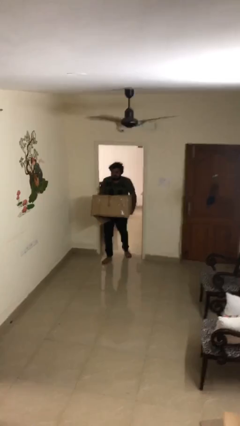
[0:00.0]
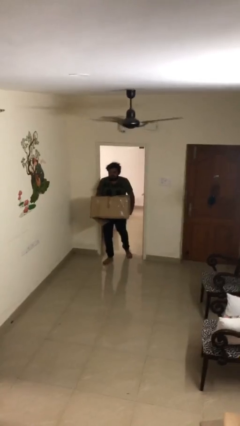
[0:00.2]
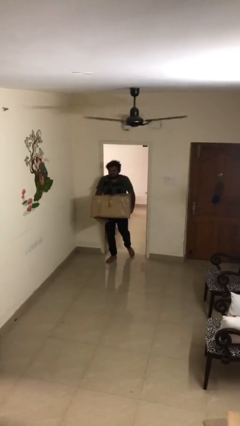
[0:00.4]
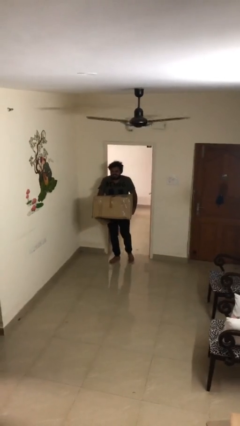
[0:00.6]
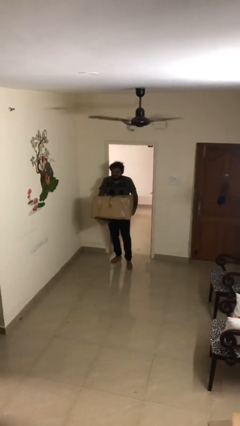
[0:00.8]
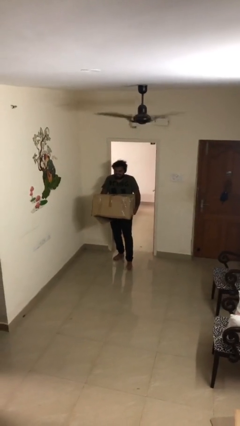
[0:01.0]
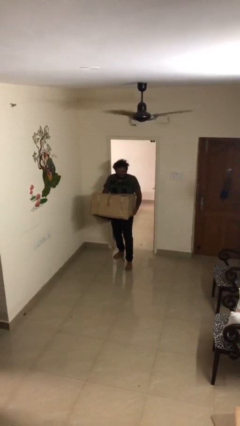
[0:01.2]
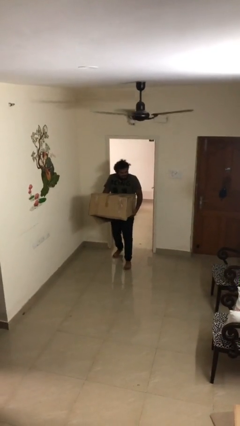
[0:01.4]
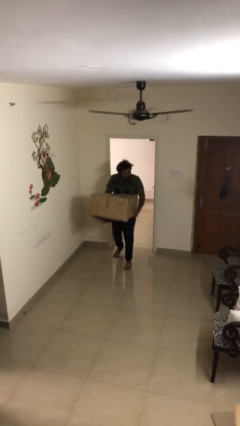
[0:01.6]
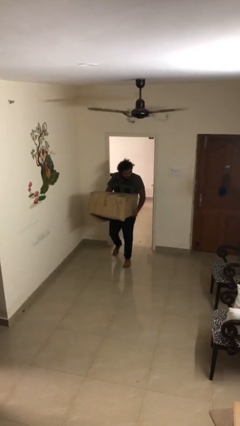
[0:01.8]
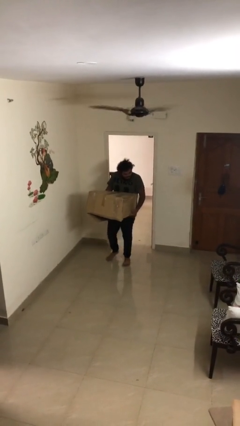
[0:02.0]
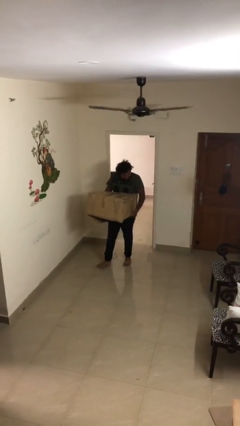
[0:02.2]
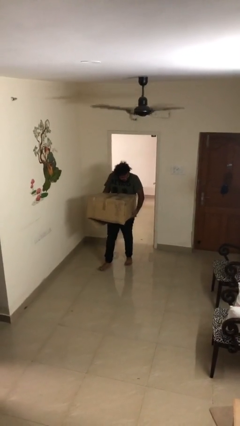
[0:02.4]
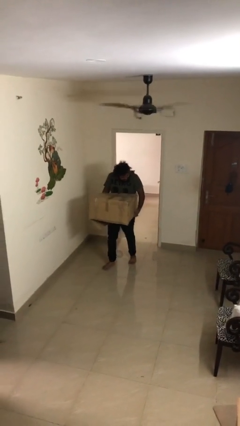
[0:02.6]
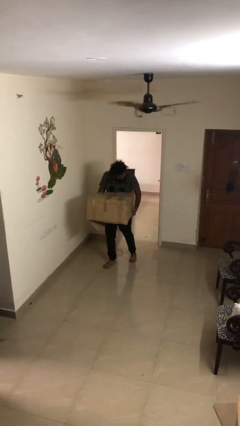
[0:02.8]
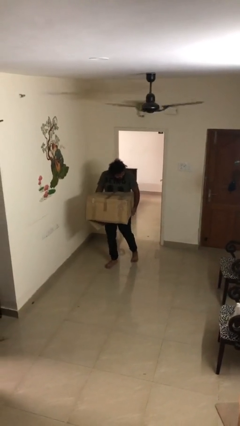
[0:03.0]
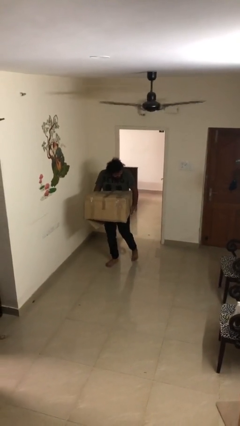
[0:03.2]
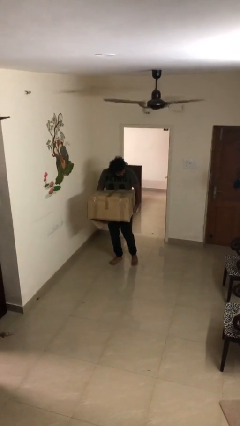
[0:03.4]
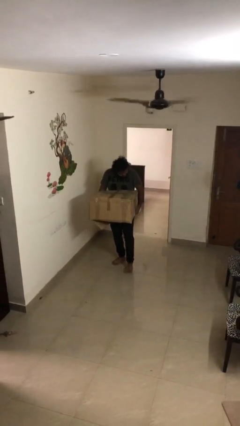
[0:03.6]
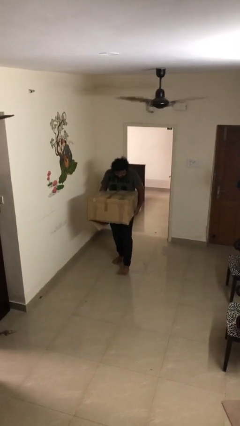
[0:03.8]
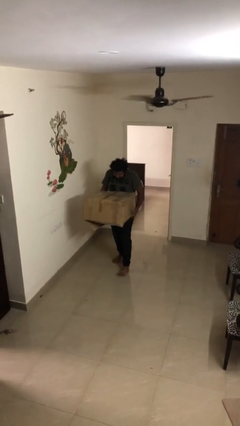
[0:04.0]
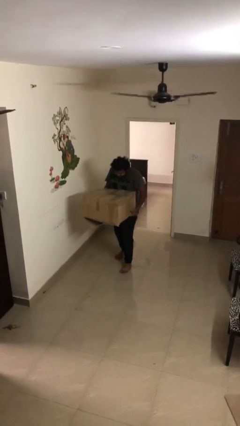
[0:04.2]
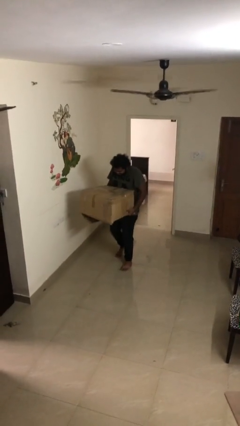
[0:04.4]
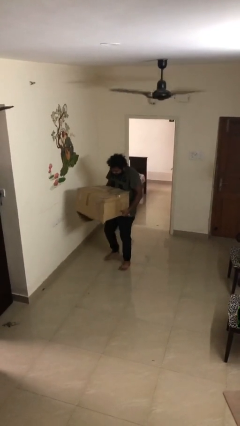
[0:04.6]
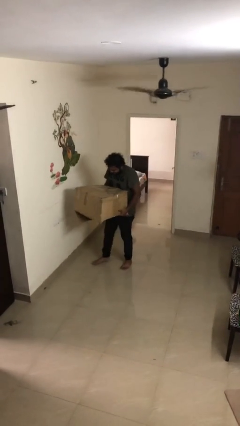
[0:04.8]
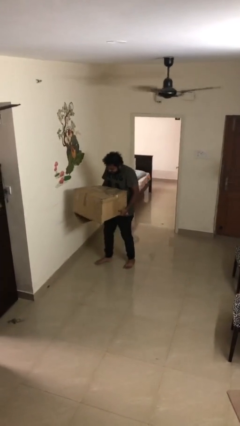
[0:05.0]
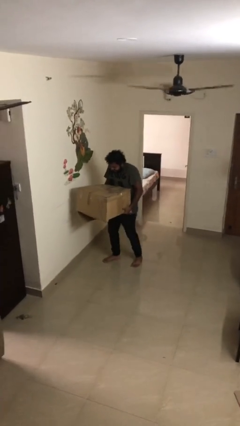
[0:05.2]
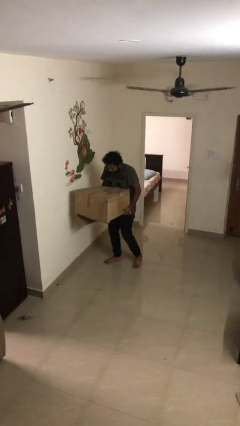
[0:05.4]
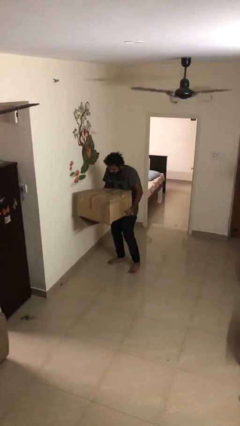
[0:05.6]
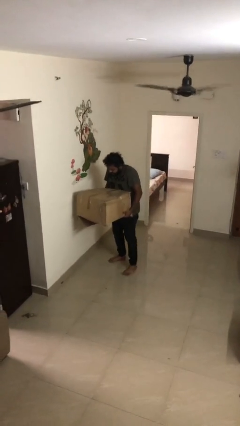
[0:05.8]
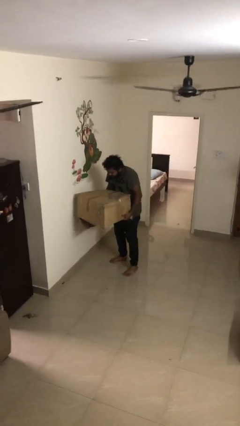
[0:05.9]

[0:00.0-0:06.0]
person carries heavy object

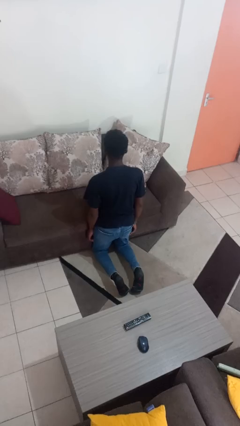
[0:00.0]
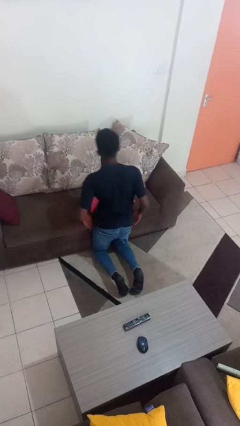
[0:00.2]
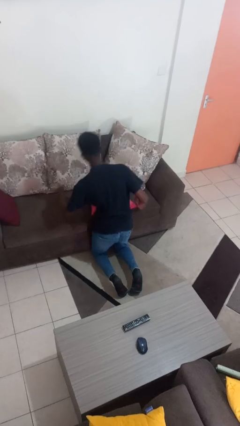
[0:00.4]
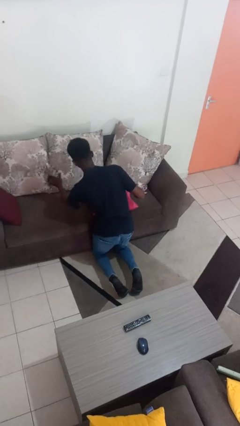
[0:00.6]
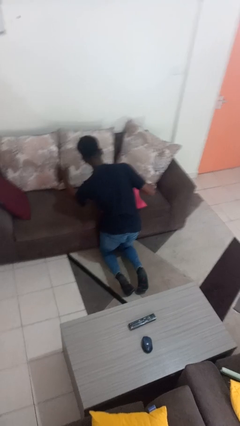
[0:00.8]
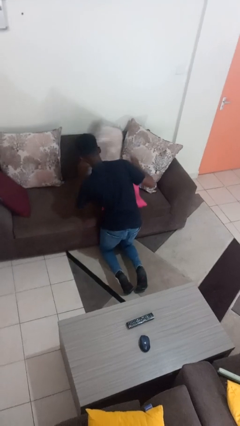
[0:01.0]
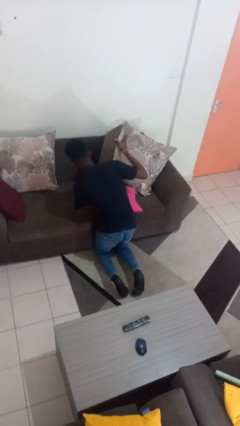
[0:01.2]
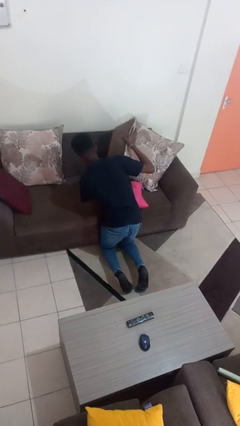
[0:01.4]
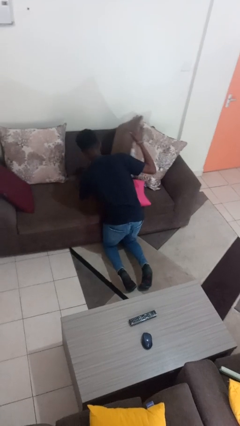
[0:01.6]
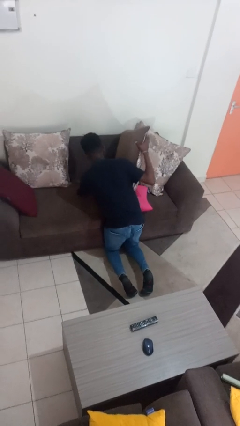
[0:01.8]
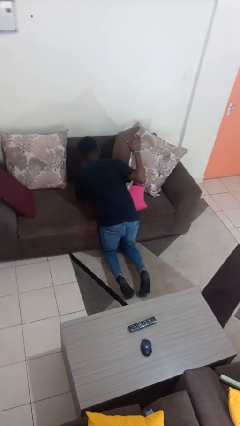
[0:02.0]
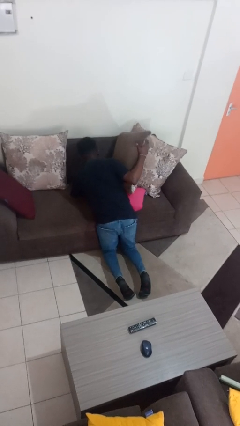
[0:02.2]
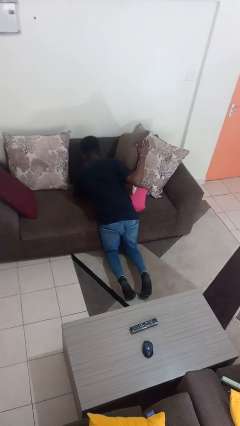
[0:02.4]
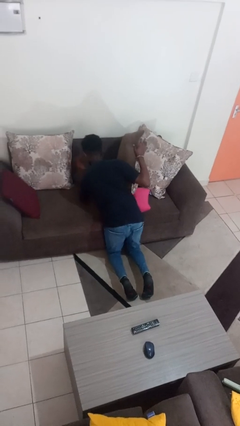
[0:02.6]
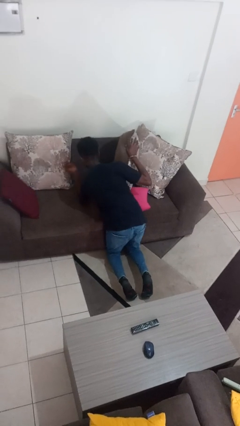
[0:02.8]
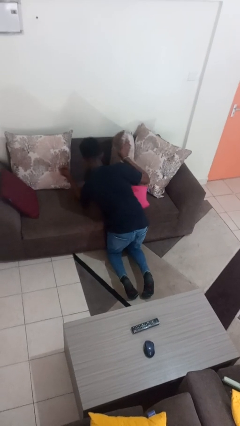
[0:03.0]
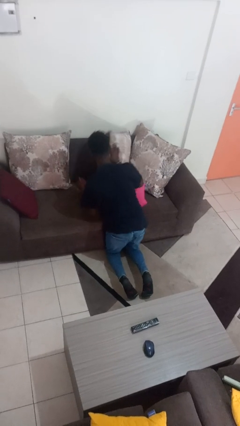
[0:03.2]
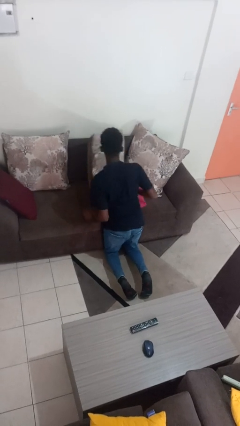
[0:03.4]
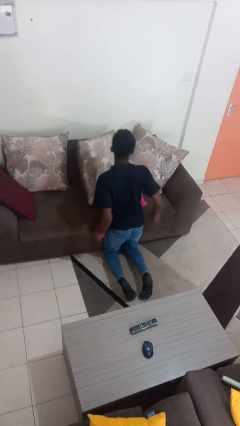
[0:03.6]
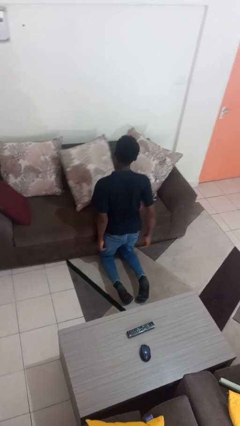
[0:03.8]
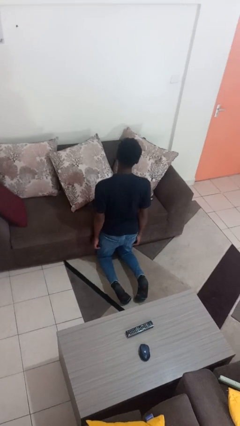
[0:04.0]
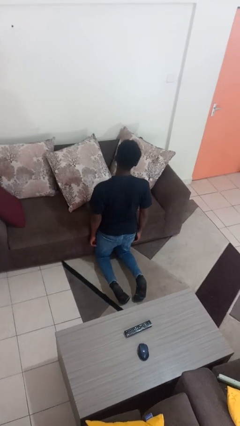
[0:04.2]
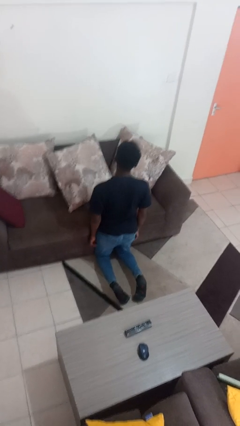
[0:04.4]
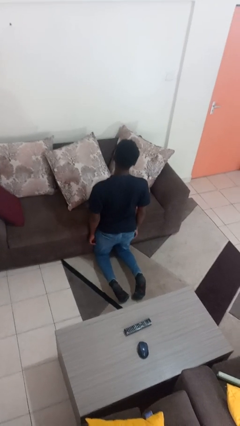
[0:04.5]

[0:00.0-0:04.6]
person searches in couch

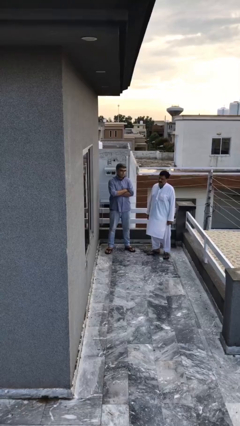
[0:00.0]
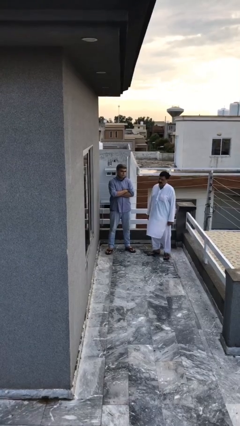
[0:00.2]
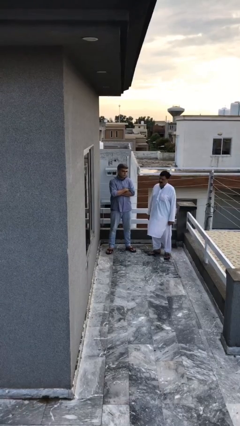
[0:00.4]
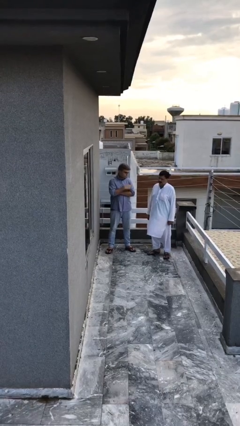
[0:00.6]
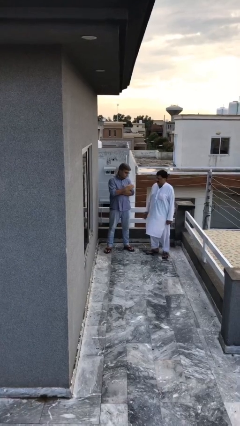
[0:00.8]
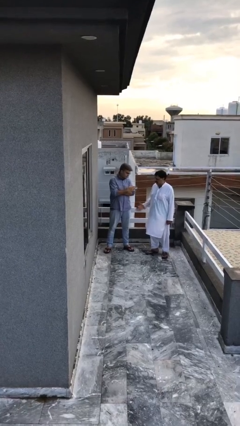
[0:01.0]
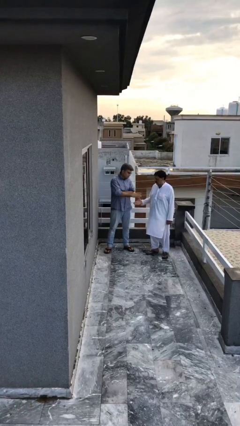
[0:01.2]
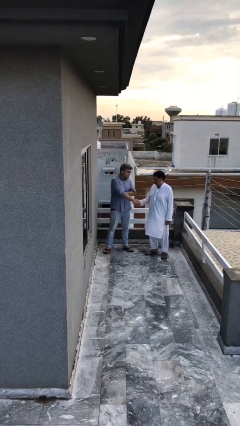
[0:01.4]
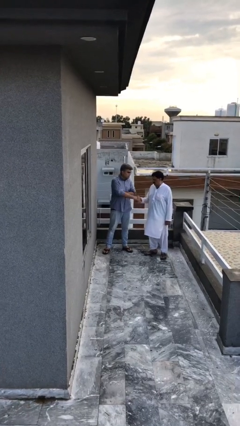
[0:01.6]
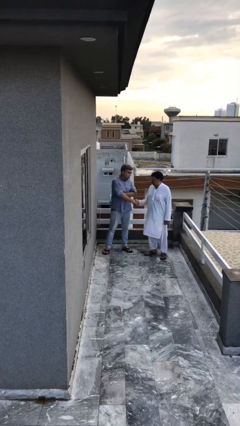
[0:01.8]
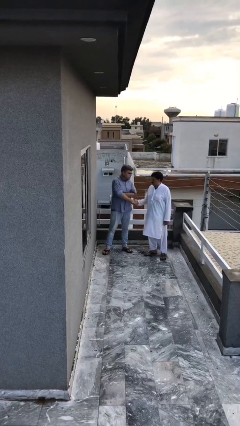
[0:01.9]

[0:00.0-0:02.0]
person shakes hand

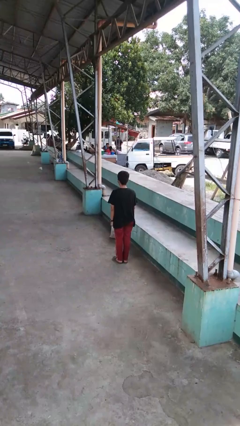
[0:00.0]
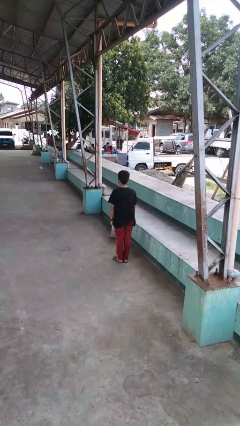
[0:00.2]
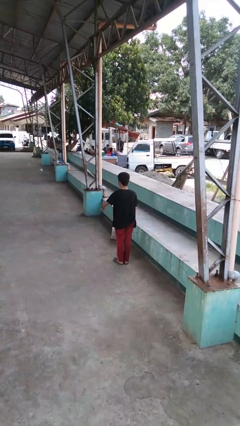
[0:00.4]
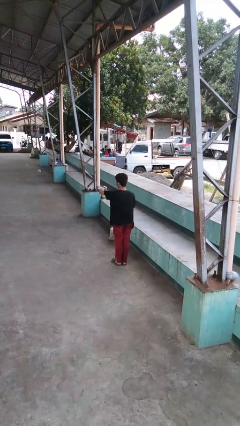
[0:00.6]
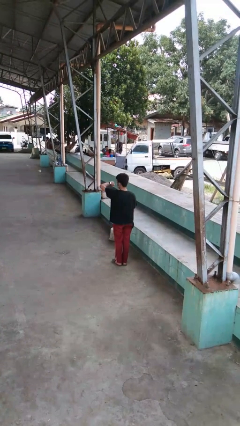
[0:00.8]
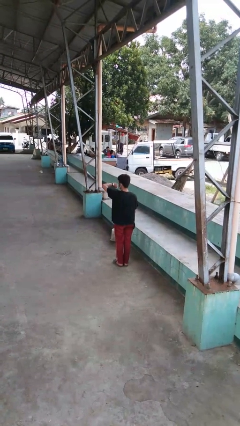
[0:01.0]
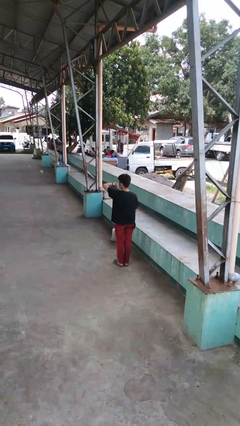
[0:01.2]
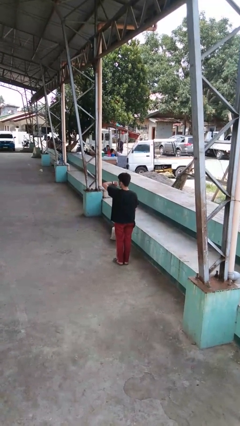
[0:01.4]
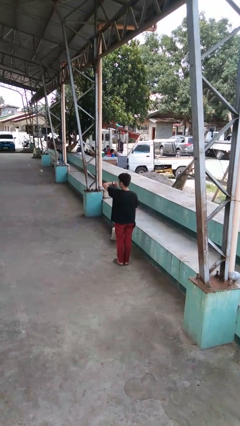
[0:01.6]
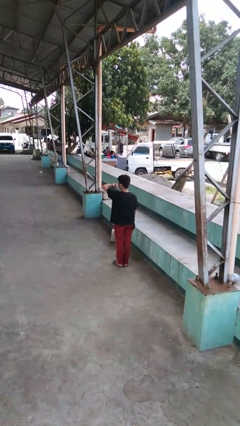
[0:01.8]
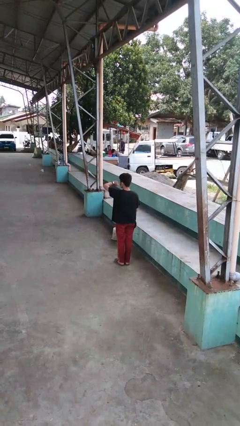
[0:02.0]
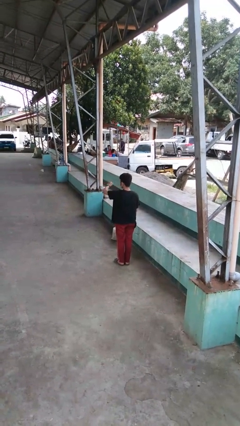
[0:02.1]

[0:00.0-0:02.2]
person looks at wristwatch

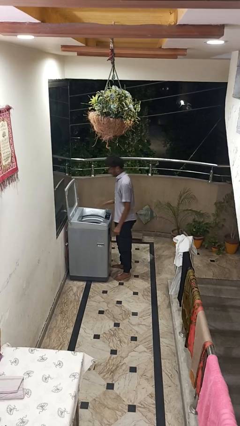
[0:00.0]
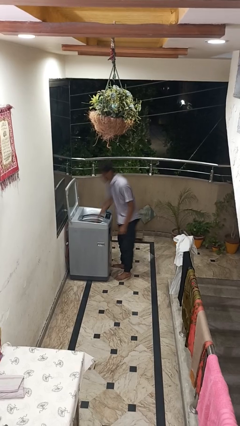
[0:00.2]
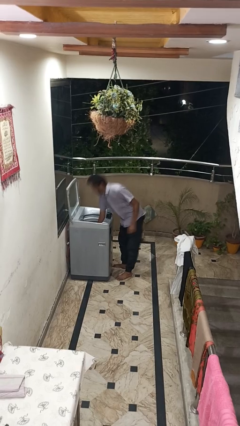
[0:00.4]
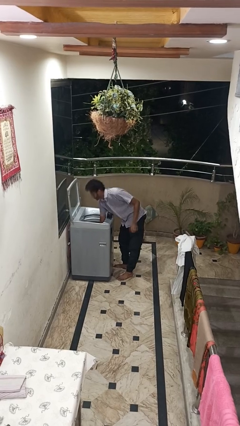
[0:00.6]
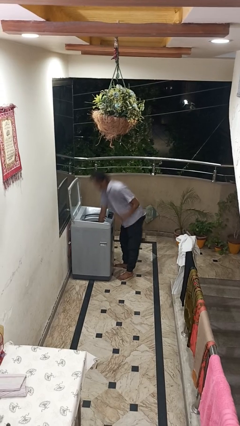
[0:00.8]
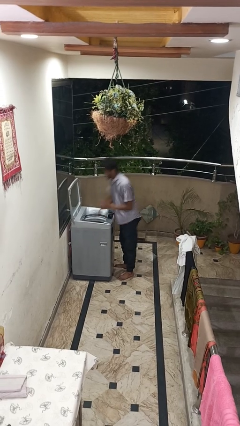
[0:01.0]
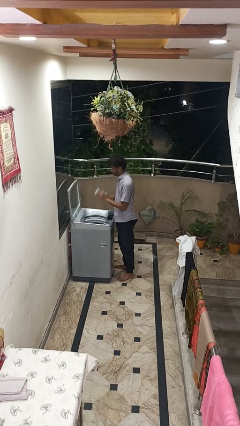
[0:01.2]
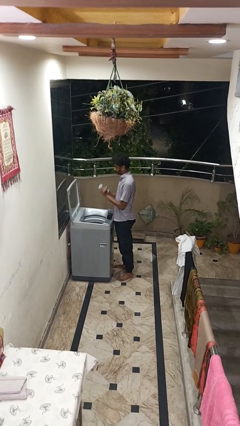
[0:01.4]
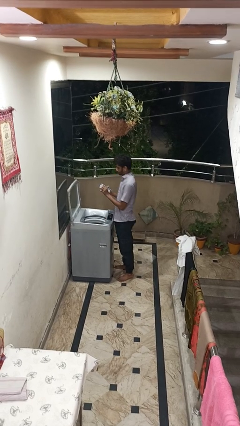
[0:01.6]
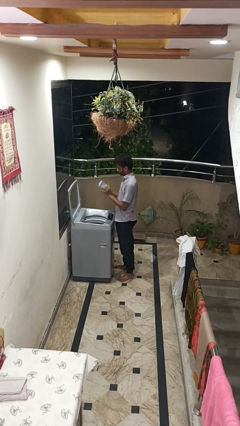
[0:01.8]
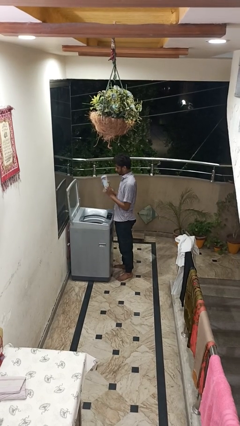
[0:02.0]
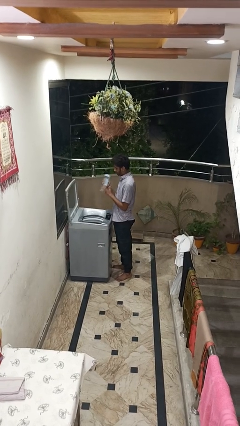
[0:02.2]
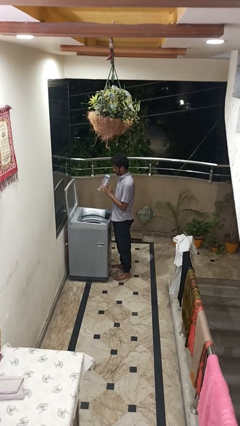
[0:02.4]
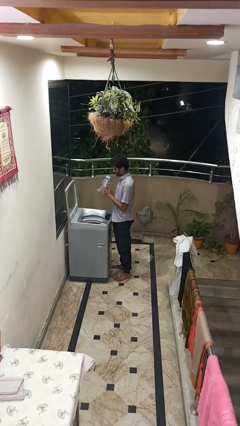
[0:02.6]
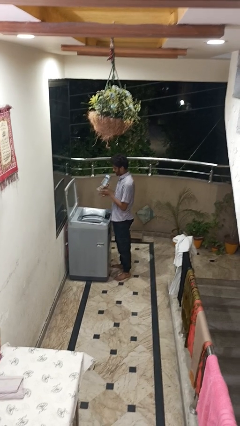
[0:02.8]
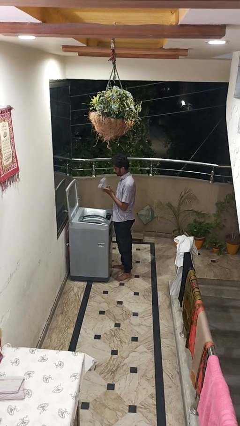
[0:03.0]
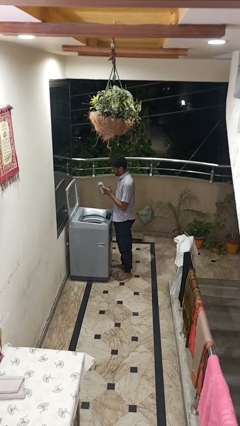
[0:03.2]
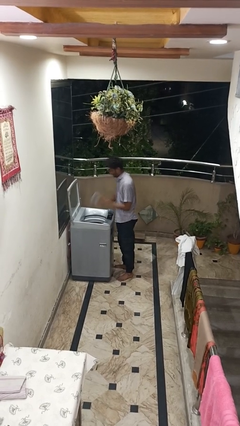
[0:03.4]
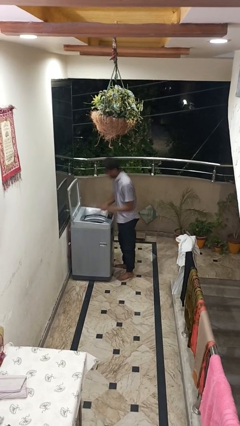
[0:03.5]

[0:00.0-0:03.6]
person cleans dryer lint trap
